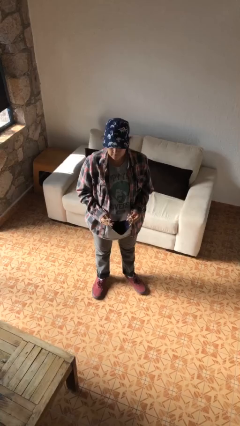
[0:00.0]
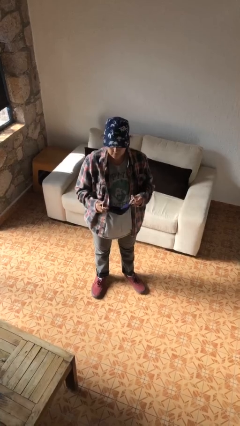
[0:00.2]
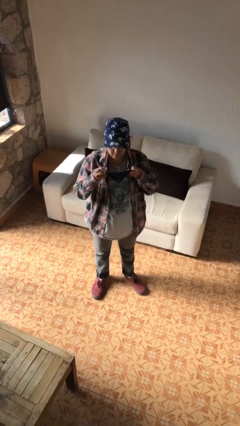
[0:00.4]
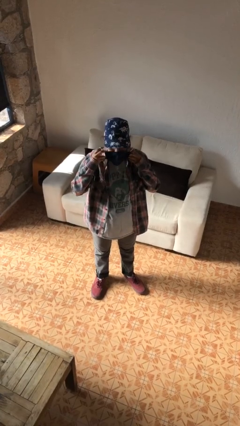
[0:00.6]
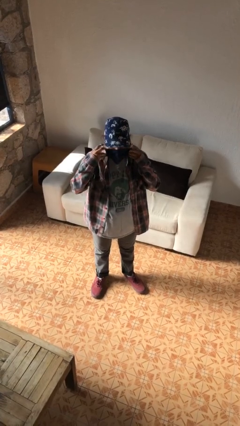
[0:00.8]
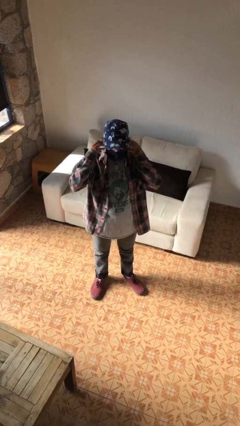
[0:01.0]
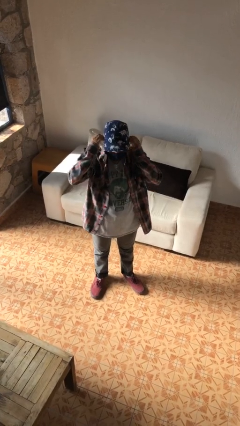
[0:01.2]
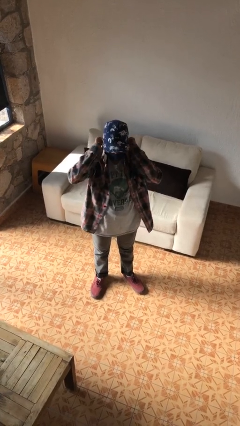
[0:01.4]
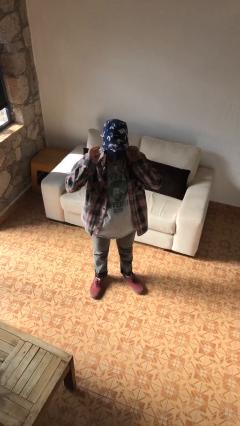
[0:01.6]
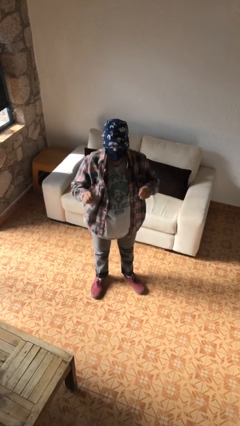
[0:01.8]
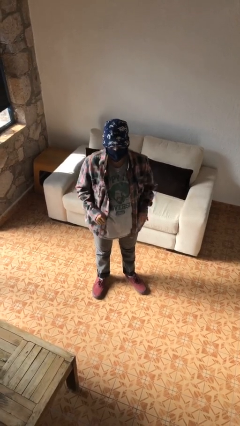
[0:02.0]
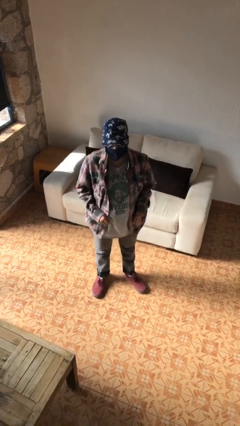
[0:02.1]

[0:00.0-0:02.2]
person puts on facemask

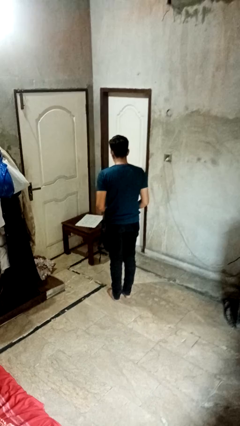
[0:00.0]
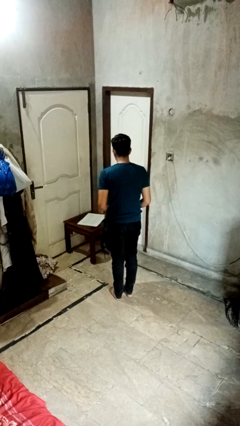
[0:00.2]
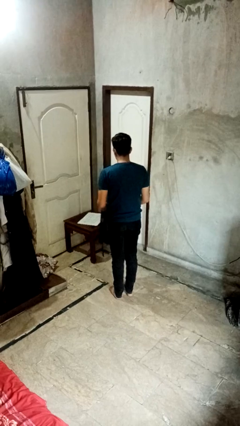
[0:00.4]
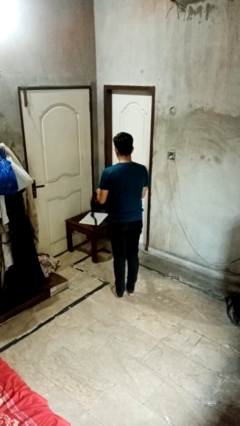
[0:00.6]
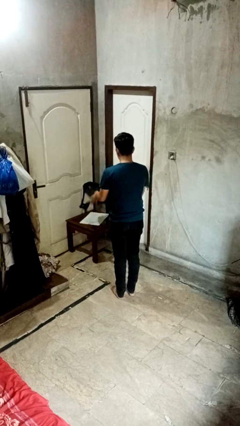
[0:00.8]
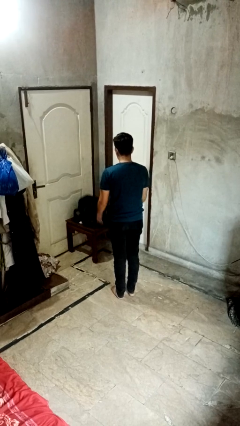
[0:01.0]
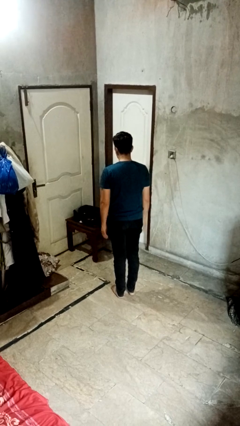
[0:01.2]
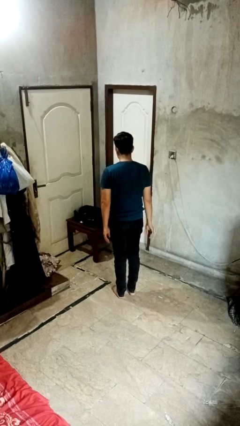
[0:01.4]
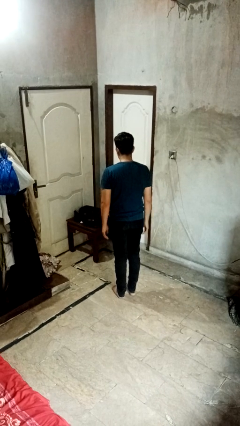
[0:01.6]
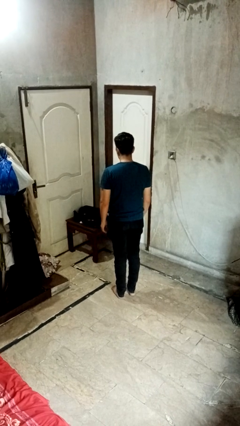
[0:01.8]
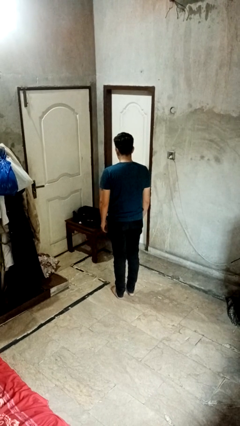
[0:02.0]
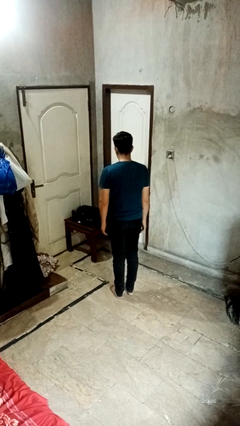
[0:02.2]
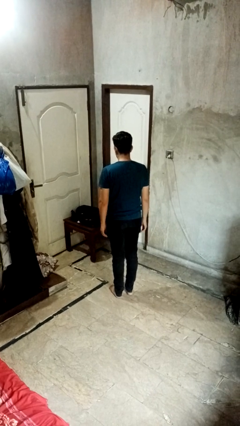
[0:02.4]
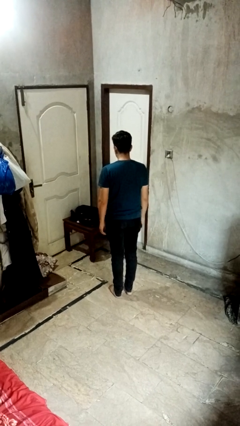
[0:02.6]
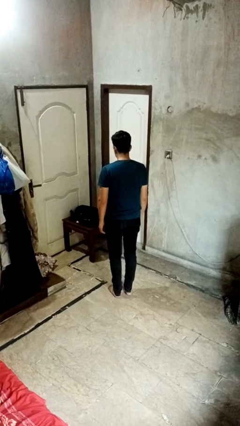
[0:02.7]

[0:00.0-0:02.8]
person throws object on table

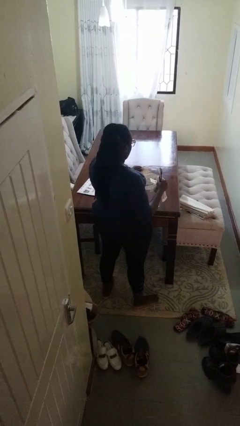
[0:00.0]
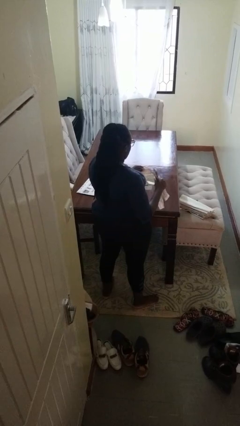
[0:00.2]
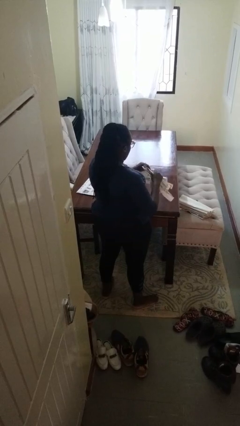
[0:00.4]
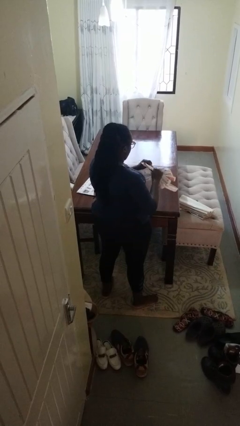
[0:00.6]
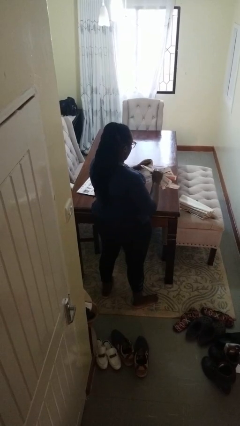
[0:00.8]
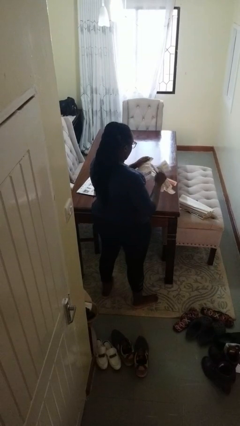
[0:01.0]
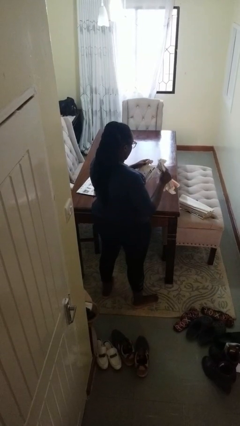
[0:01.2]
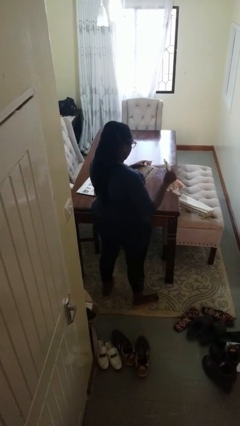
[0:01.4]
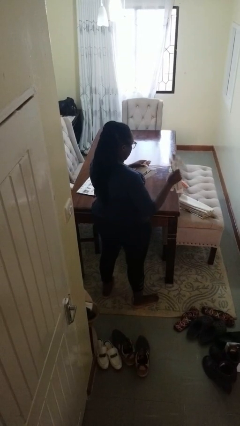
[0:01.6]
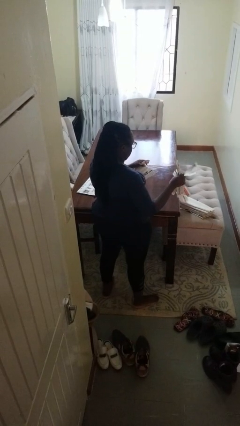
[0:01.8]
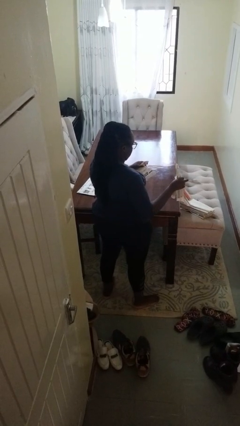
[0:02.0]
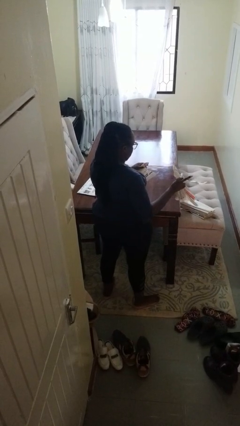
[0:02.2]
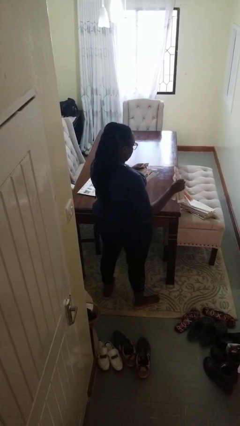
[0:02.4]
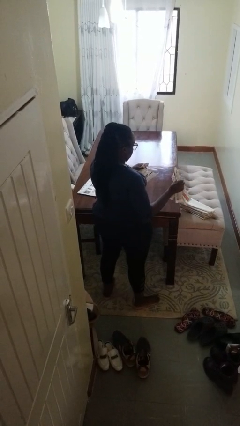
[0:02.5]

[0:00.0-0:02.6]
person tears paper

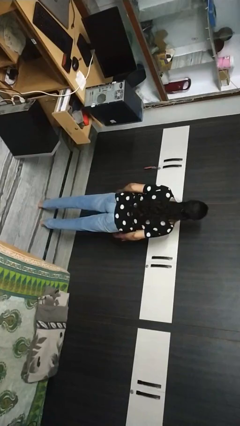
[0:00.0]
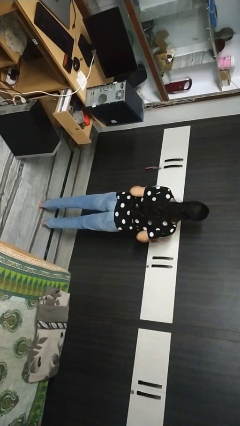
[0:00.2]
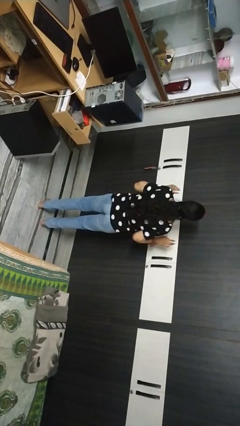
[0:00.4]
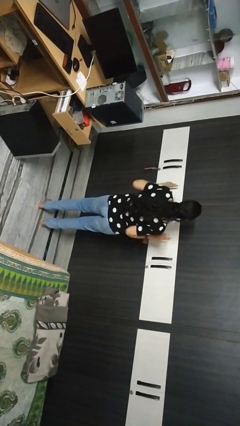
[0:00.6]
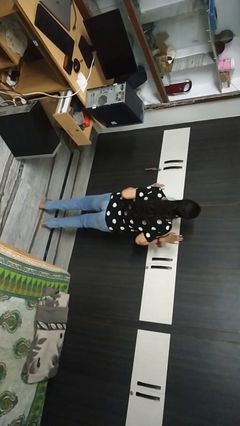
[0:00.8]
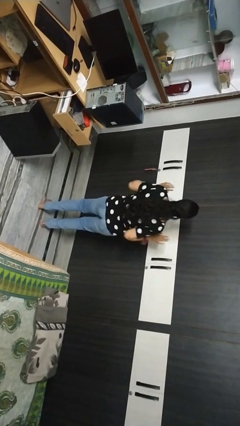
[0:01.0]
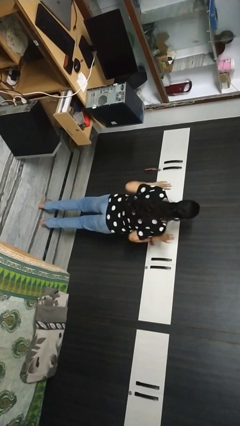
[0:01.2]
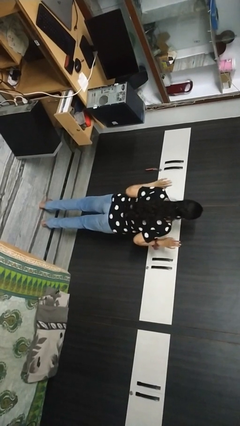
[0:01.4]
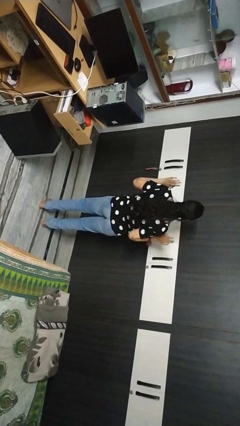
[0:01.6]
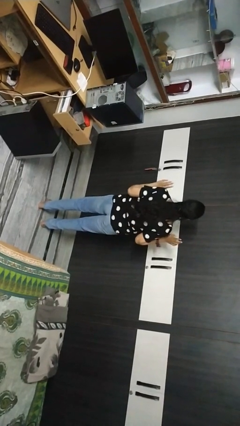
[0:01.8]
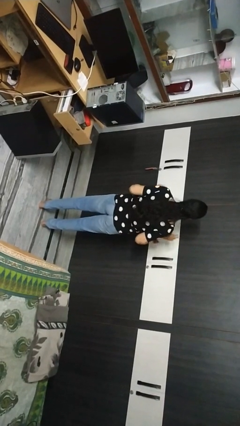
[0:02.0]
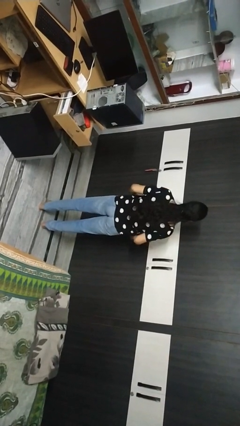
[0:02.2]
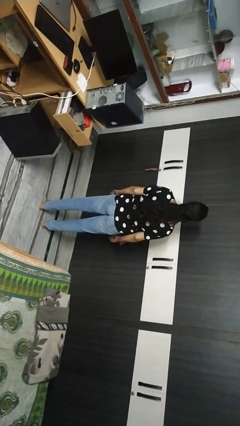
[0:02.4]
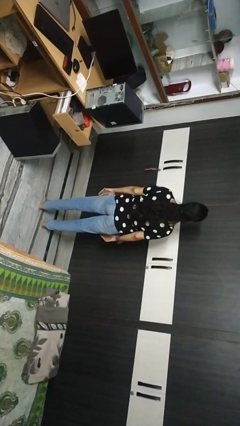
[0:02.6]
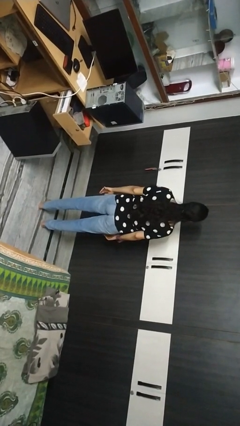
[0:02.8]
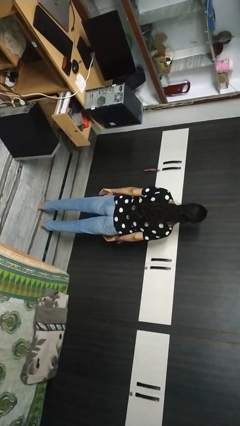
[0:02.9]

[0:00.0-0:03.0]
person dances in place

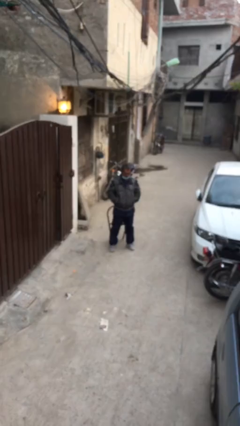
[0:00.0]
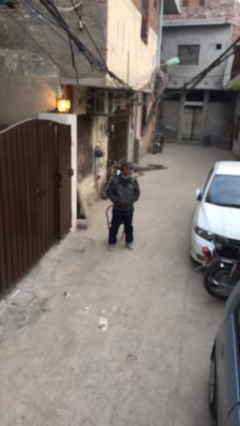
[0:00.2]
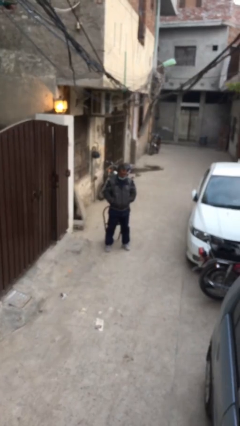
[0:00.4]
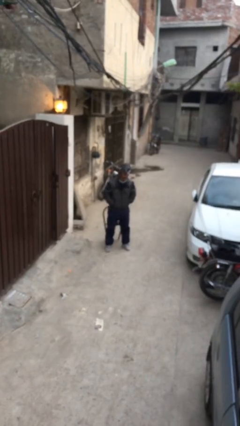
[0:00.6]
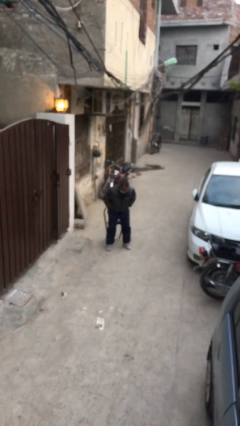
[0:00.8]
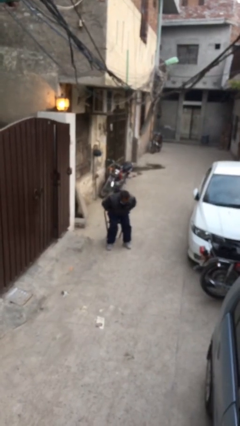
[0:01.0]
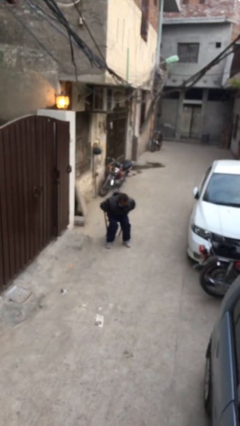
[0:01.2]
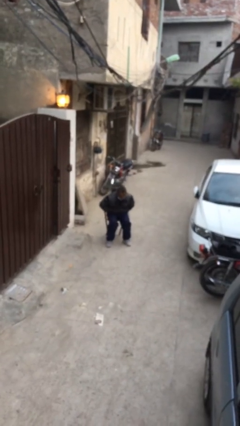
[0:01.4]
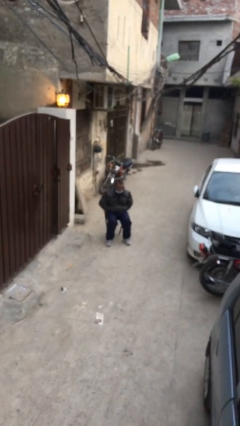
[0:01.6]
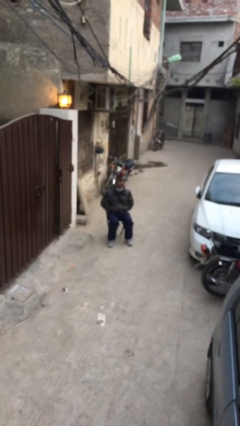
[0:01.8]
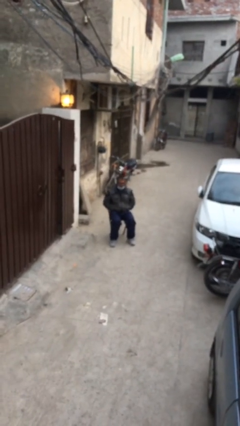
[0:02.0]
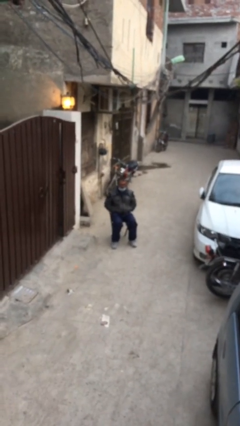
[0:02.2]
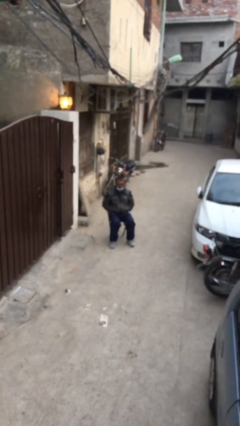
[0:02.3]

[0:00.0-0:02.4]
person sits down

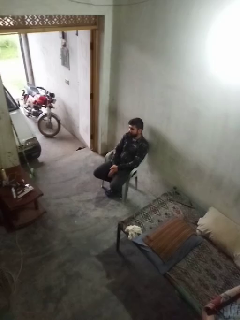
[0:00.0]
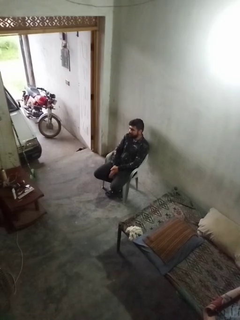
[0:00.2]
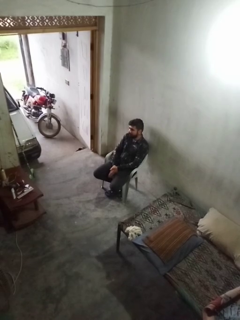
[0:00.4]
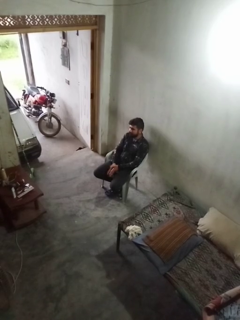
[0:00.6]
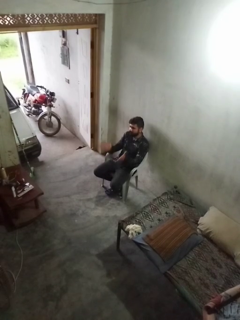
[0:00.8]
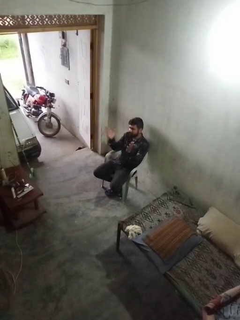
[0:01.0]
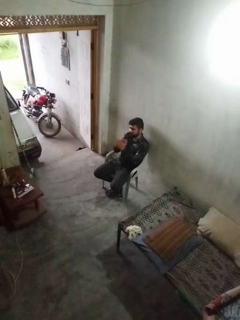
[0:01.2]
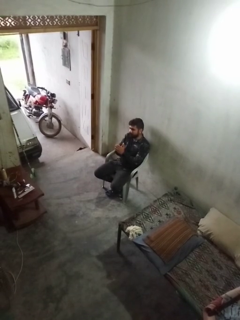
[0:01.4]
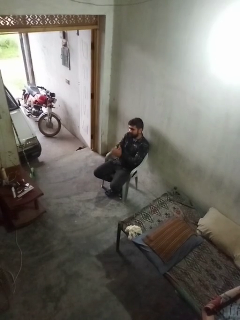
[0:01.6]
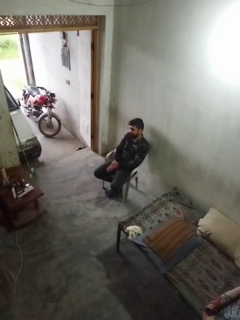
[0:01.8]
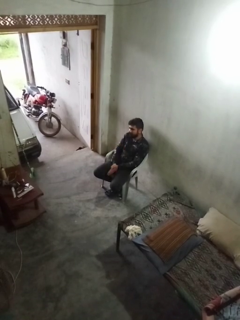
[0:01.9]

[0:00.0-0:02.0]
person claps hands

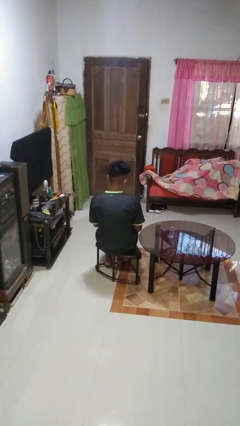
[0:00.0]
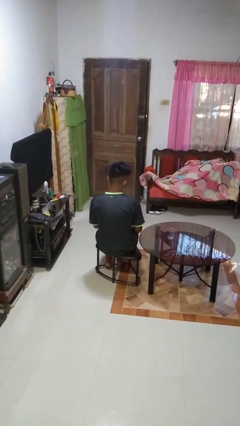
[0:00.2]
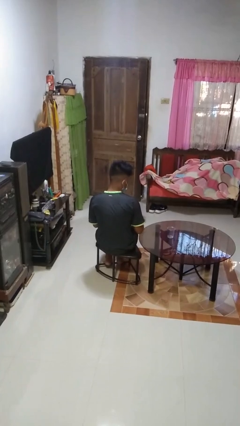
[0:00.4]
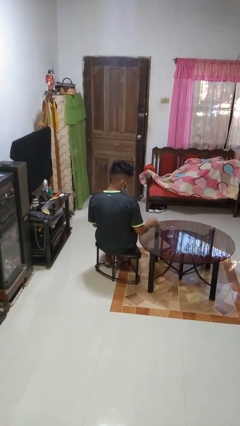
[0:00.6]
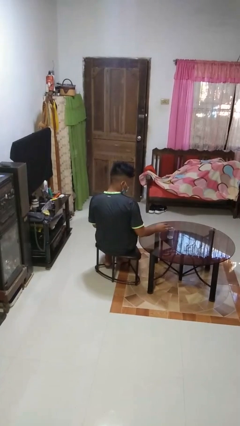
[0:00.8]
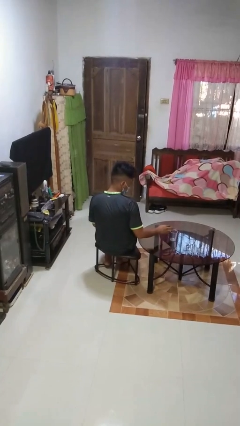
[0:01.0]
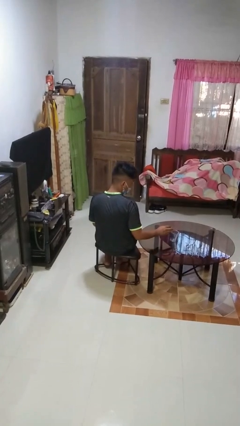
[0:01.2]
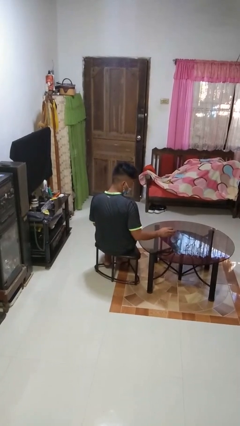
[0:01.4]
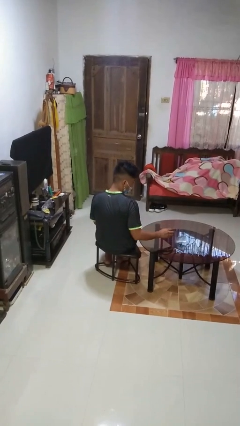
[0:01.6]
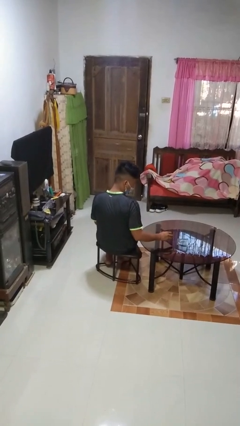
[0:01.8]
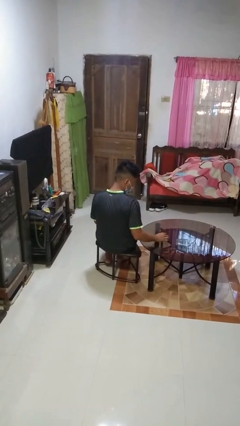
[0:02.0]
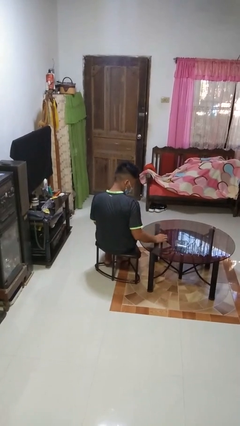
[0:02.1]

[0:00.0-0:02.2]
person opens beverage can

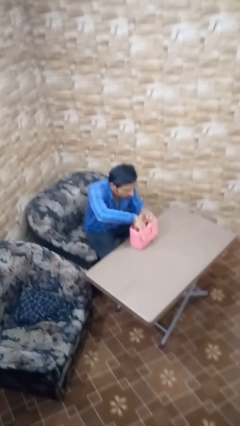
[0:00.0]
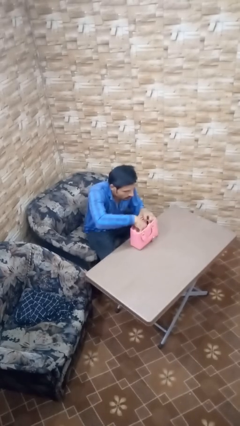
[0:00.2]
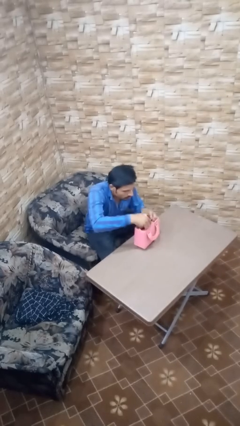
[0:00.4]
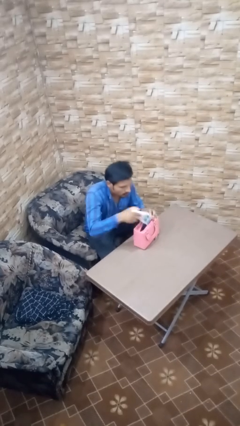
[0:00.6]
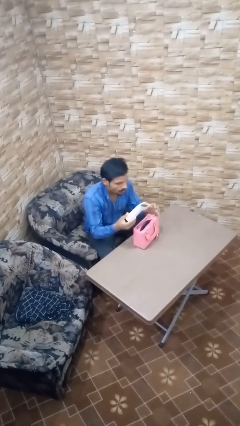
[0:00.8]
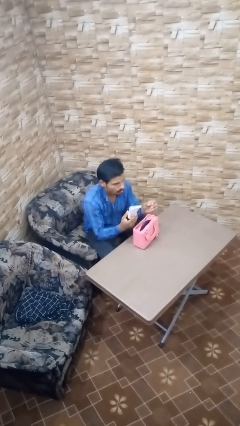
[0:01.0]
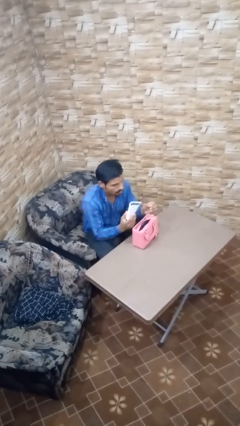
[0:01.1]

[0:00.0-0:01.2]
person takes object from purse
